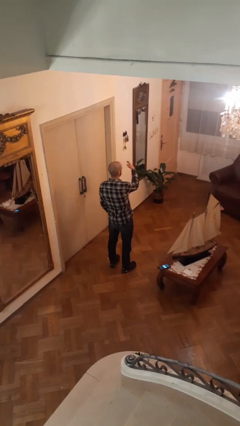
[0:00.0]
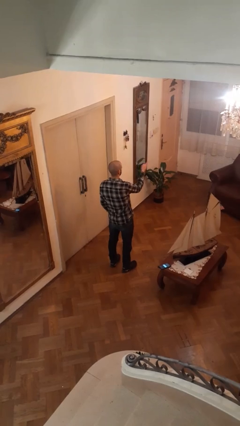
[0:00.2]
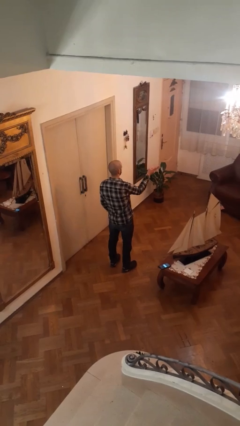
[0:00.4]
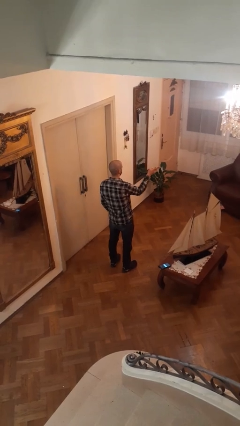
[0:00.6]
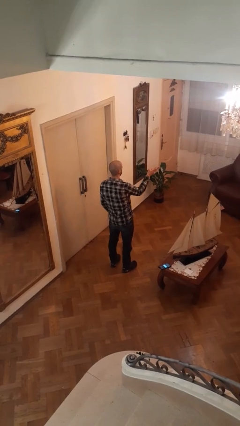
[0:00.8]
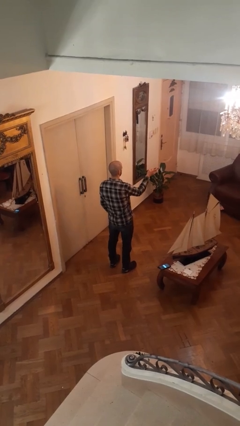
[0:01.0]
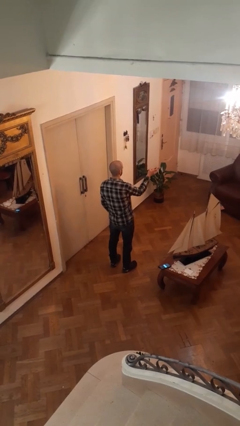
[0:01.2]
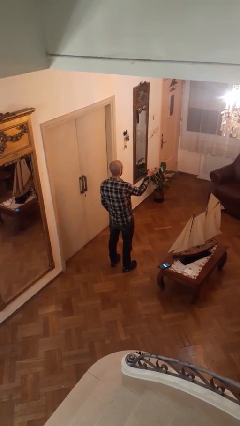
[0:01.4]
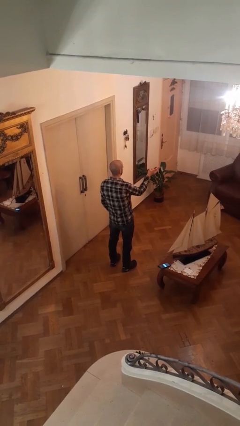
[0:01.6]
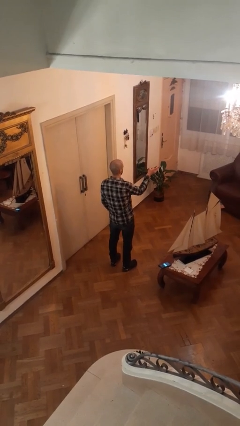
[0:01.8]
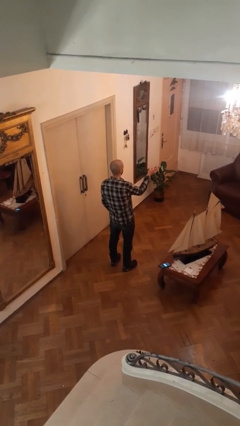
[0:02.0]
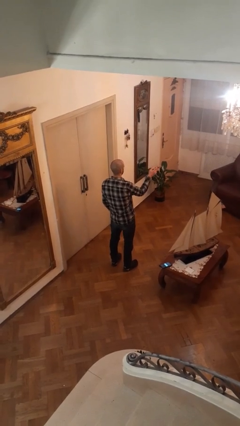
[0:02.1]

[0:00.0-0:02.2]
person gestures swipe right

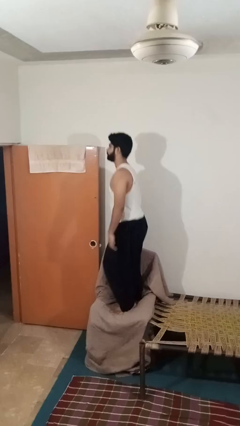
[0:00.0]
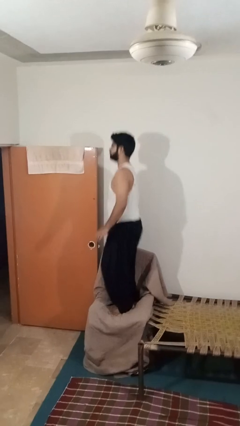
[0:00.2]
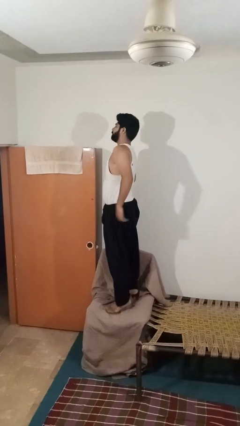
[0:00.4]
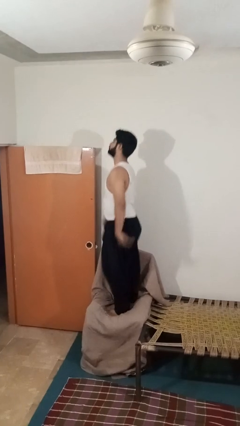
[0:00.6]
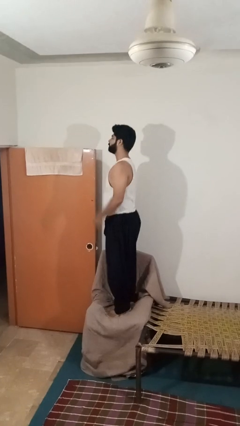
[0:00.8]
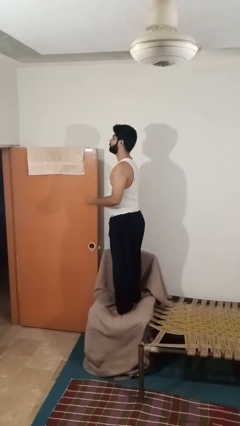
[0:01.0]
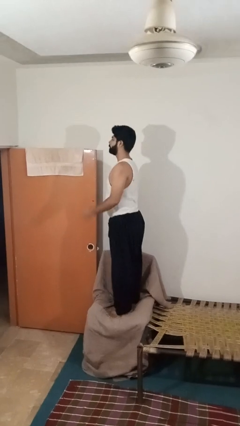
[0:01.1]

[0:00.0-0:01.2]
person jumps on couch

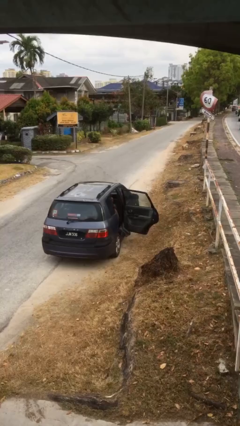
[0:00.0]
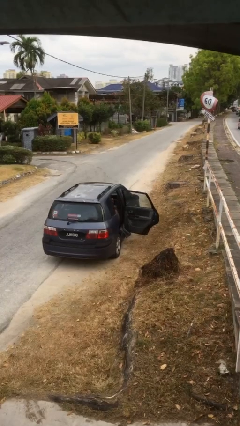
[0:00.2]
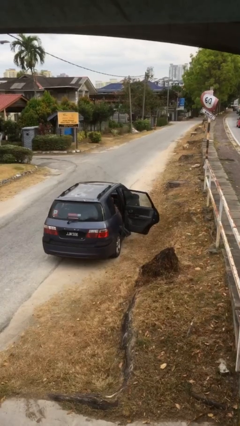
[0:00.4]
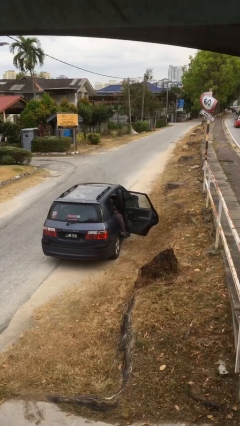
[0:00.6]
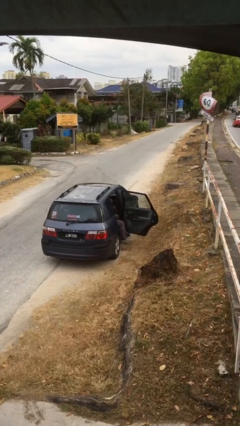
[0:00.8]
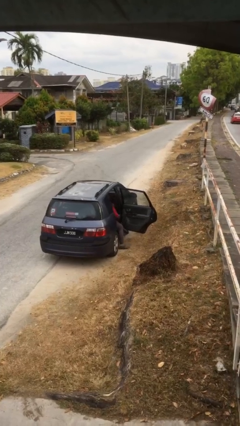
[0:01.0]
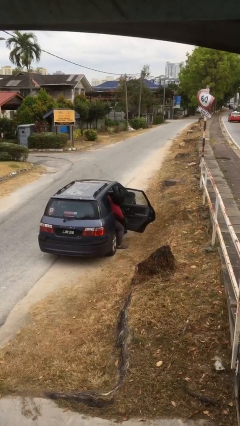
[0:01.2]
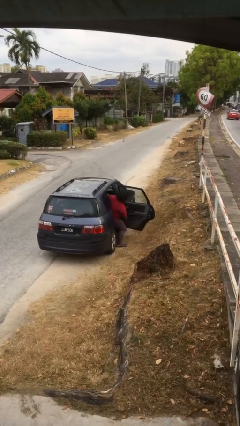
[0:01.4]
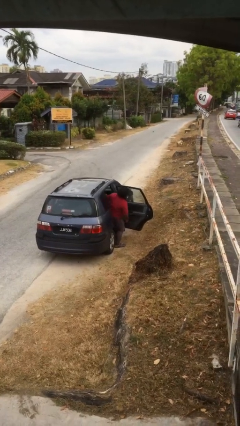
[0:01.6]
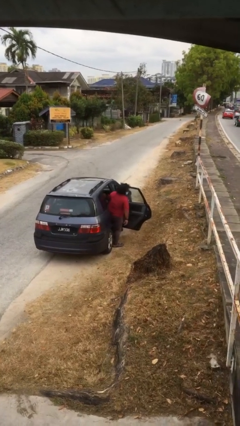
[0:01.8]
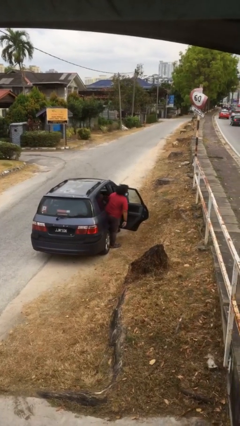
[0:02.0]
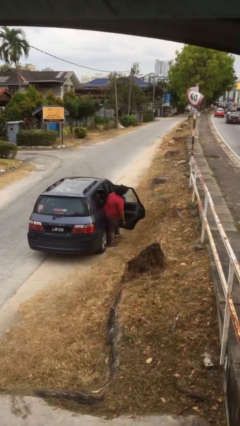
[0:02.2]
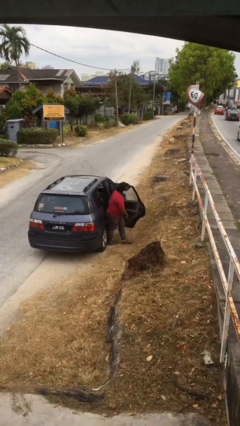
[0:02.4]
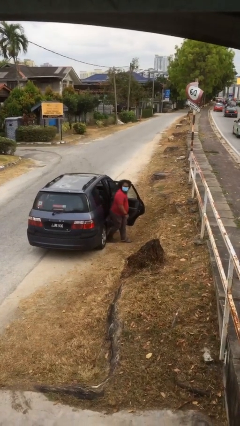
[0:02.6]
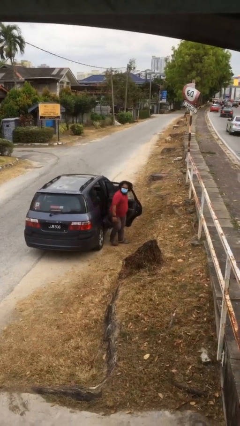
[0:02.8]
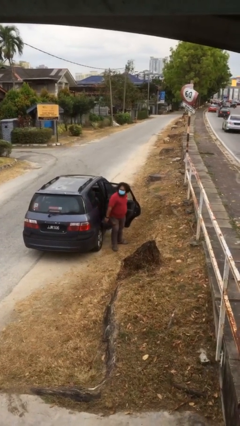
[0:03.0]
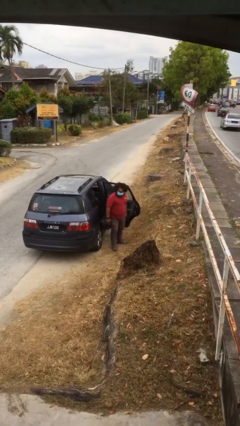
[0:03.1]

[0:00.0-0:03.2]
person exits car

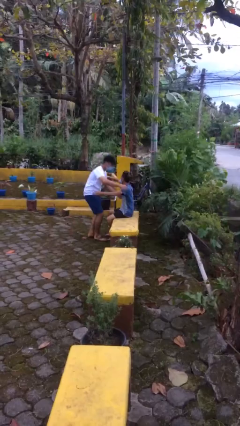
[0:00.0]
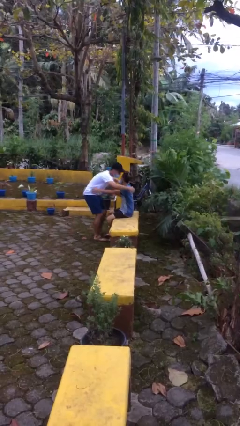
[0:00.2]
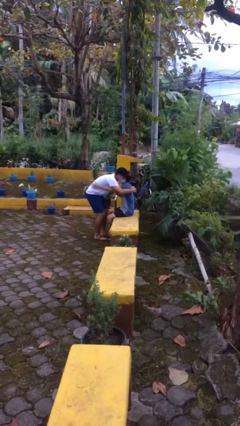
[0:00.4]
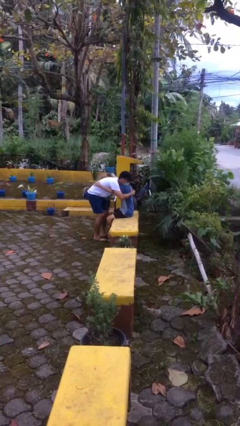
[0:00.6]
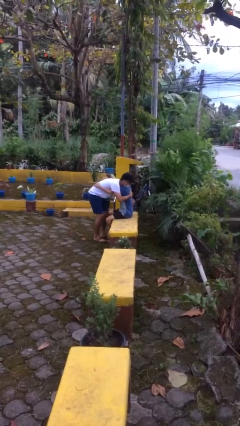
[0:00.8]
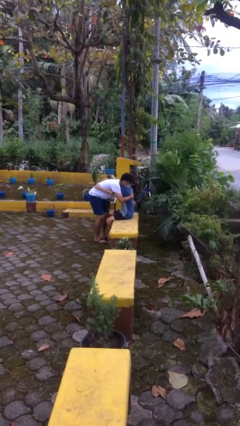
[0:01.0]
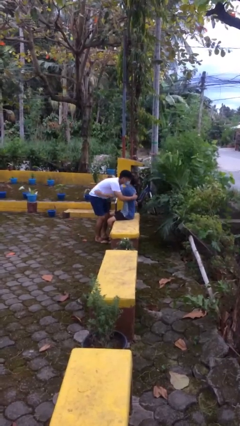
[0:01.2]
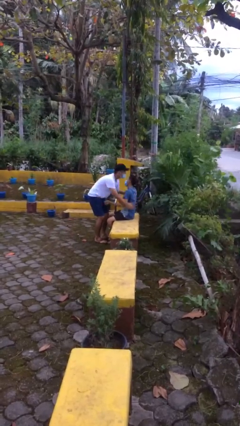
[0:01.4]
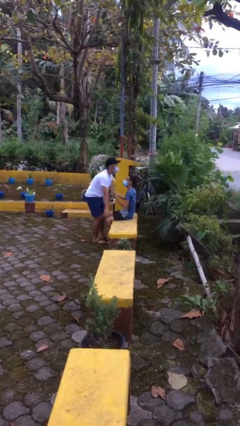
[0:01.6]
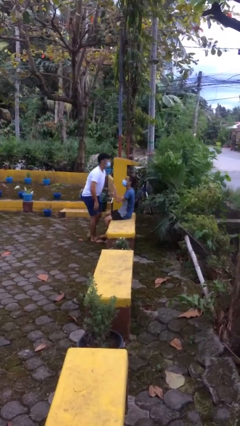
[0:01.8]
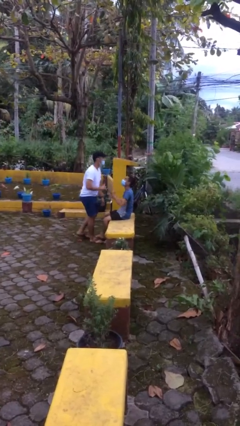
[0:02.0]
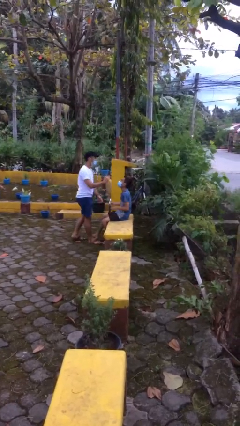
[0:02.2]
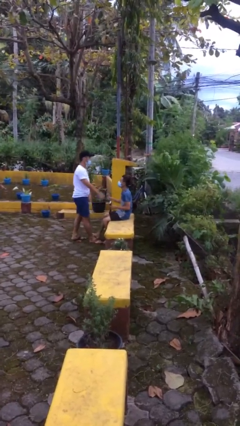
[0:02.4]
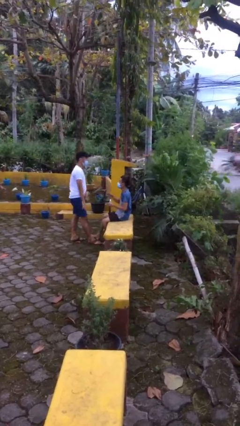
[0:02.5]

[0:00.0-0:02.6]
person embraces person

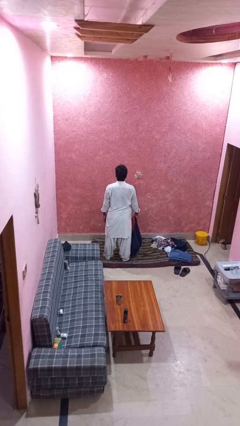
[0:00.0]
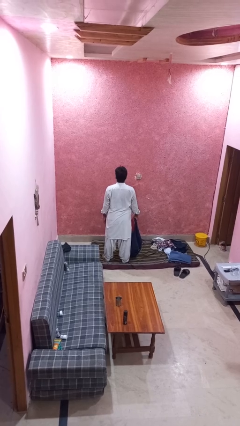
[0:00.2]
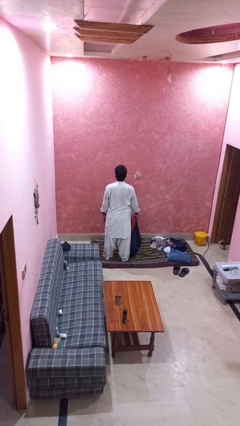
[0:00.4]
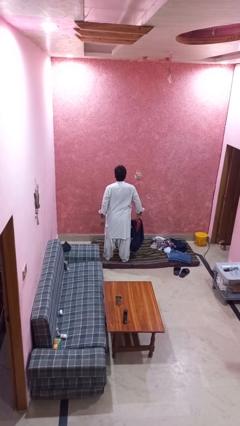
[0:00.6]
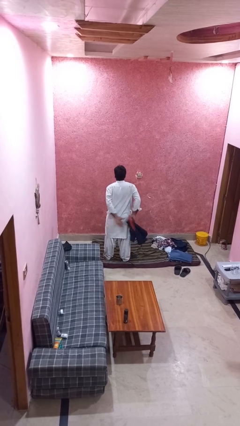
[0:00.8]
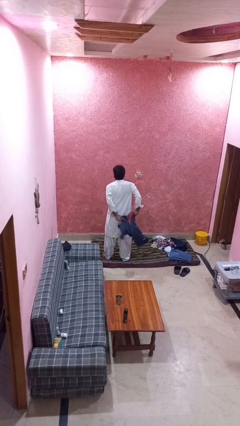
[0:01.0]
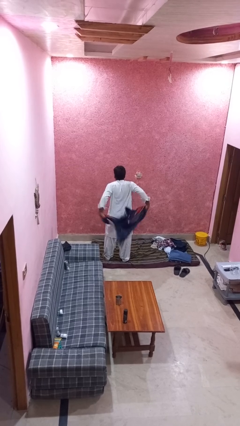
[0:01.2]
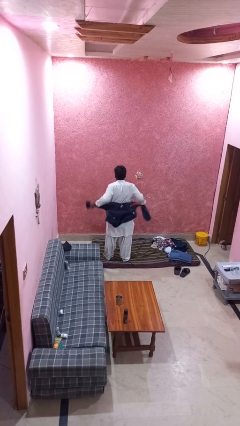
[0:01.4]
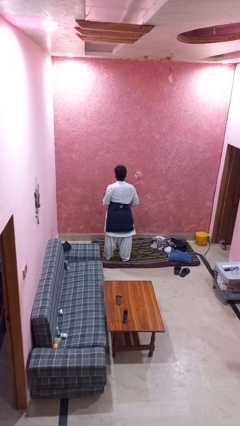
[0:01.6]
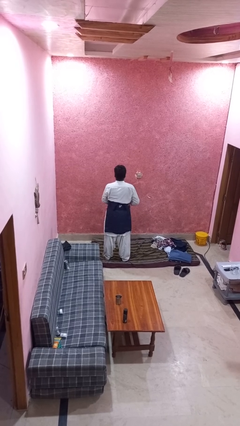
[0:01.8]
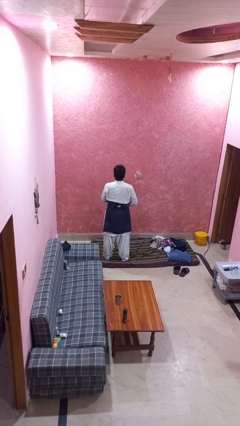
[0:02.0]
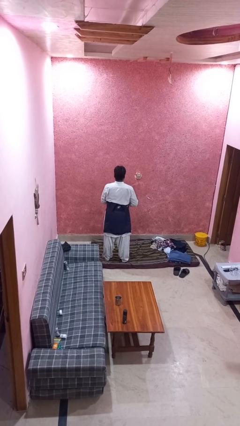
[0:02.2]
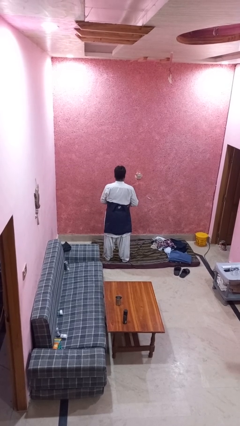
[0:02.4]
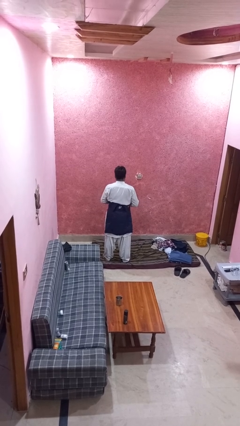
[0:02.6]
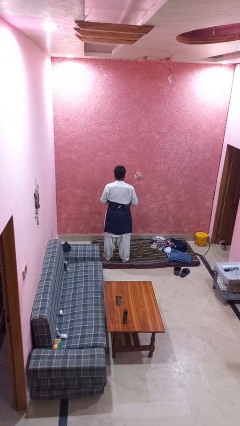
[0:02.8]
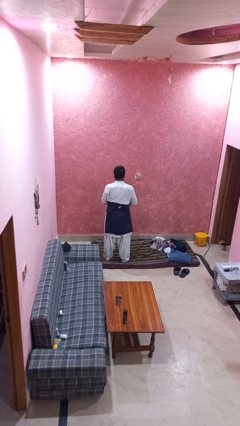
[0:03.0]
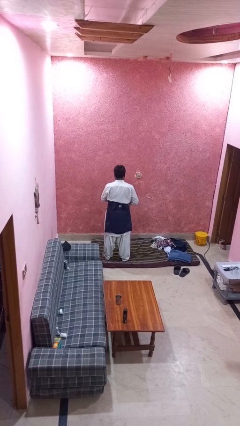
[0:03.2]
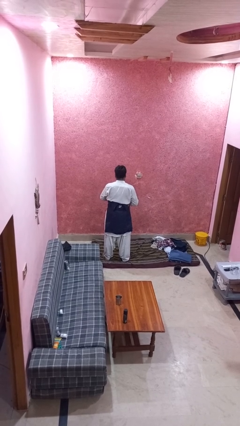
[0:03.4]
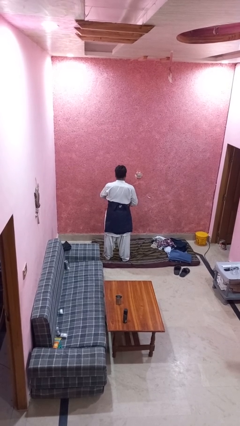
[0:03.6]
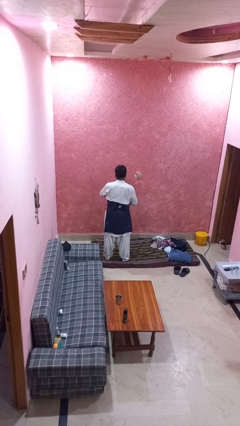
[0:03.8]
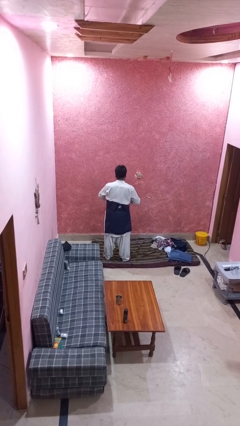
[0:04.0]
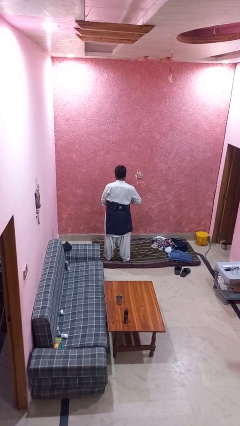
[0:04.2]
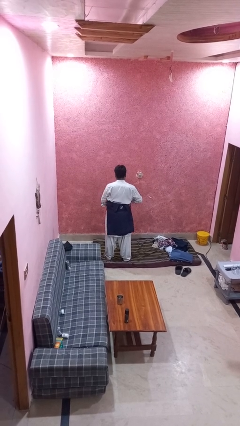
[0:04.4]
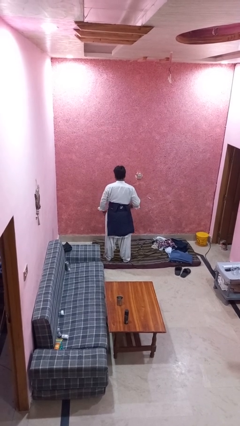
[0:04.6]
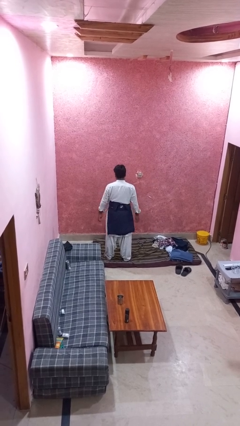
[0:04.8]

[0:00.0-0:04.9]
person ties jacket around waist

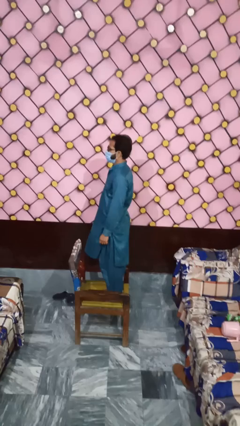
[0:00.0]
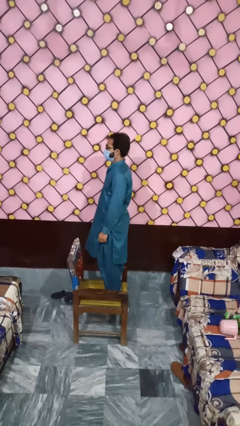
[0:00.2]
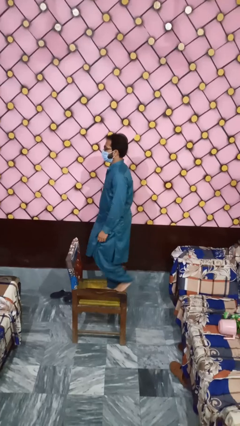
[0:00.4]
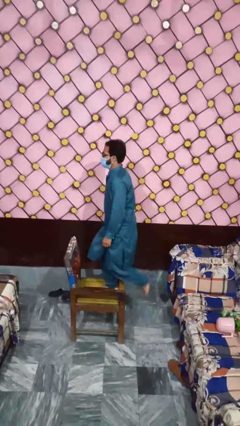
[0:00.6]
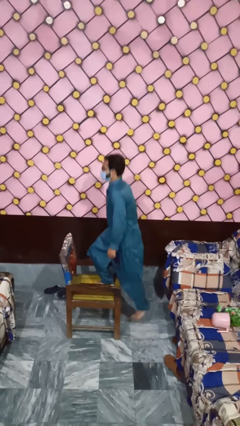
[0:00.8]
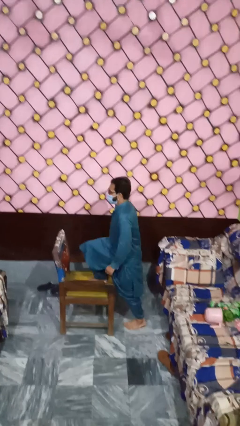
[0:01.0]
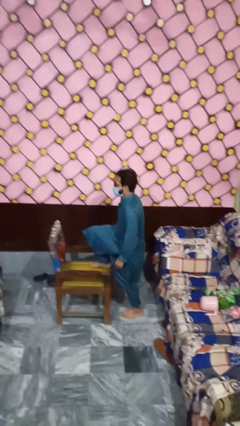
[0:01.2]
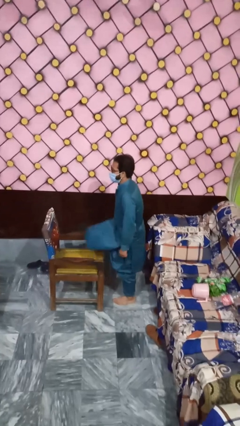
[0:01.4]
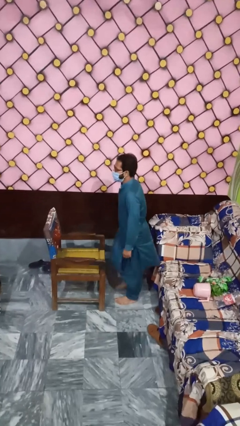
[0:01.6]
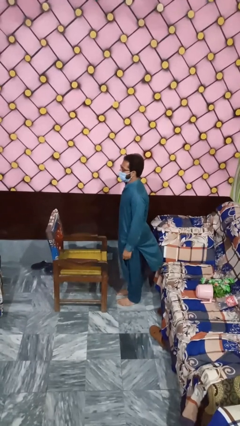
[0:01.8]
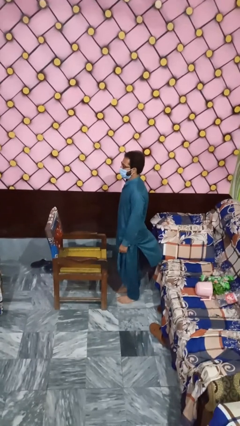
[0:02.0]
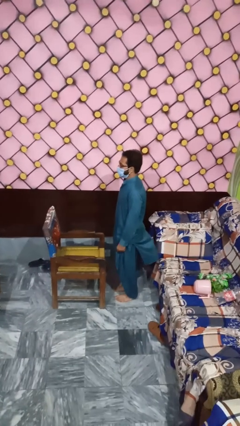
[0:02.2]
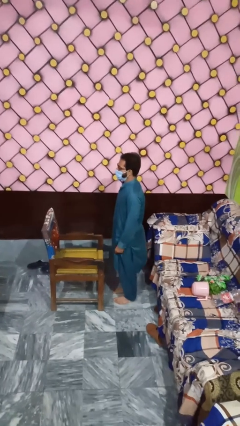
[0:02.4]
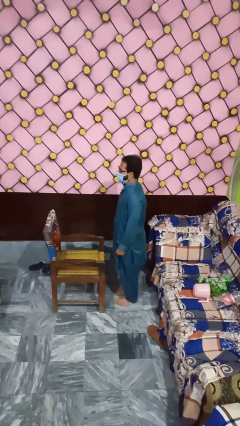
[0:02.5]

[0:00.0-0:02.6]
person climbs off chair

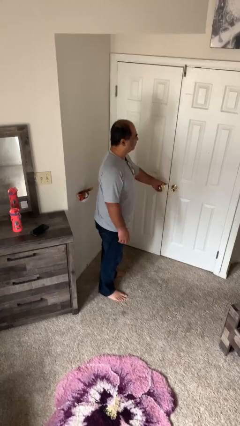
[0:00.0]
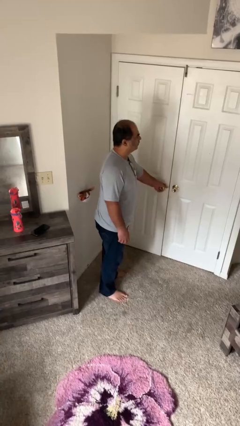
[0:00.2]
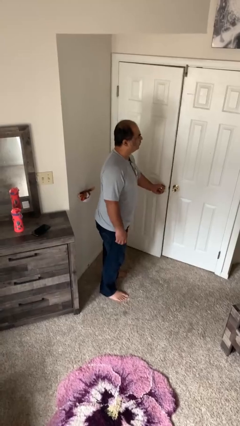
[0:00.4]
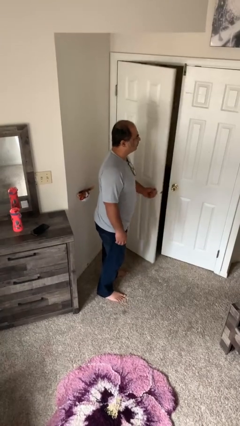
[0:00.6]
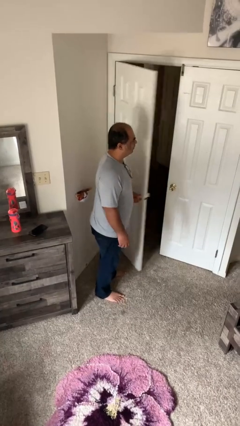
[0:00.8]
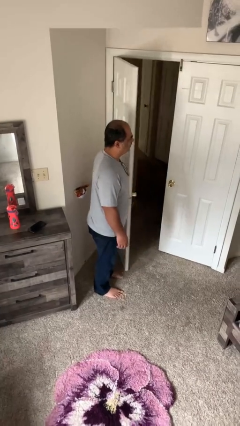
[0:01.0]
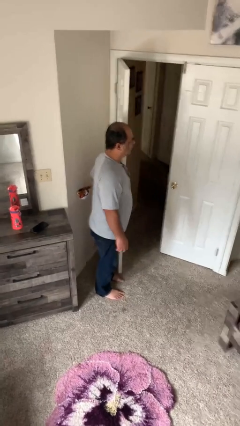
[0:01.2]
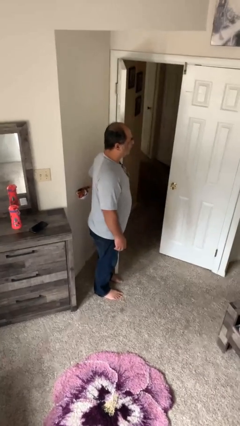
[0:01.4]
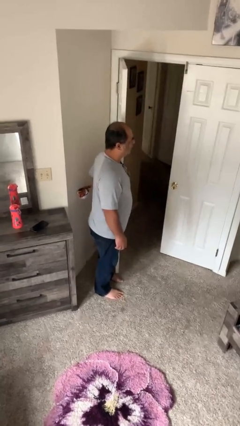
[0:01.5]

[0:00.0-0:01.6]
person opens facility door
